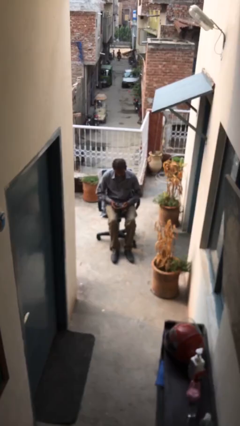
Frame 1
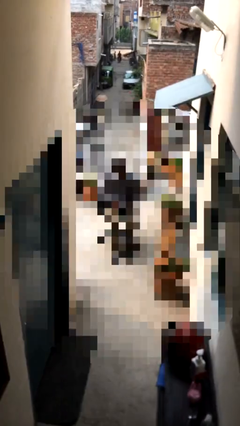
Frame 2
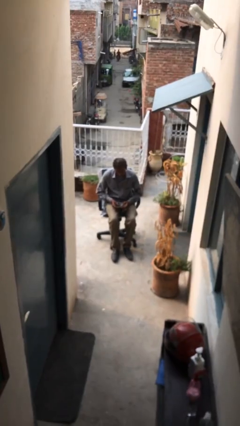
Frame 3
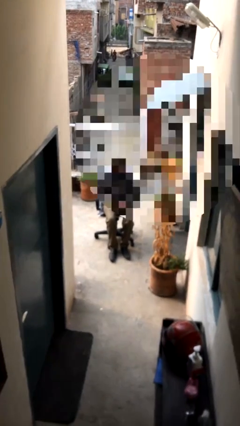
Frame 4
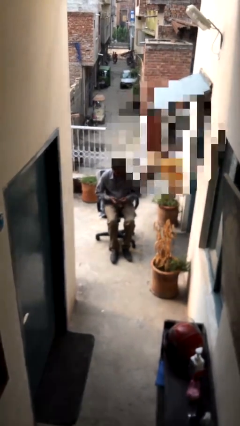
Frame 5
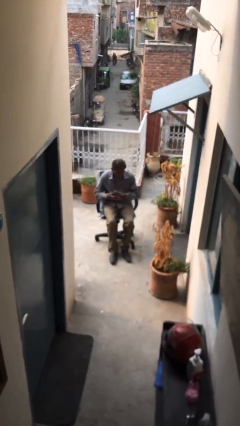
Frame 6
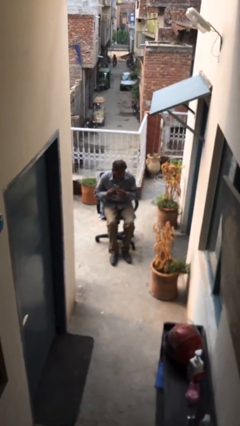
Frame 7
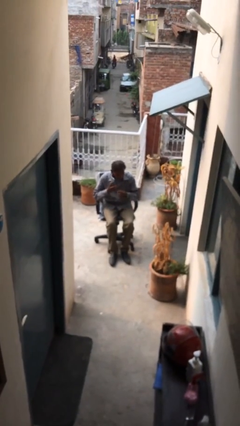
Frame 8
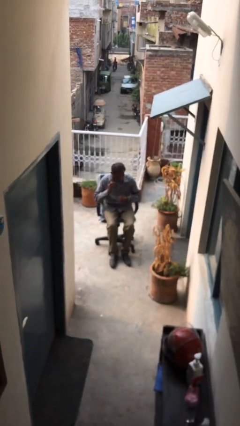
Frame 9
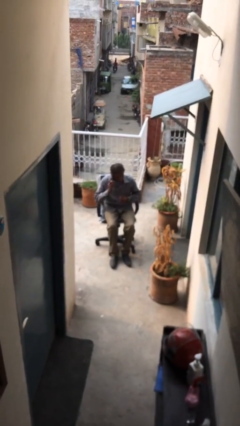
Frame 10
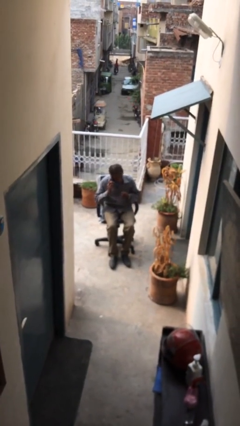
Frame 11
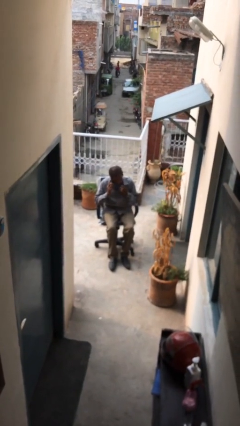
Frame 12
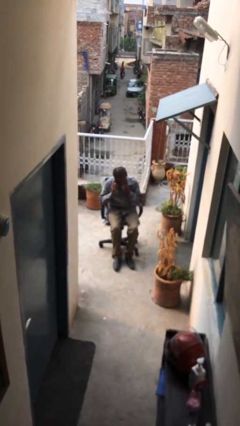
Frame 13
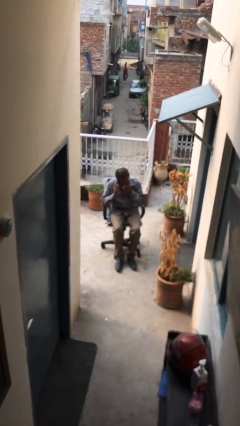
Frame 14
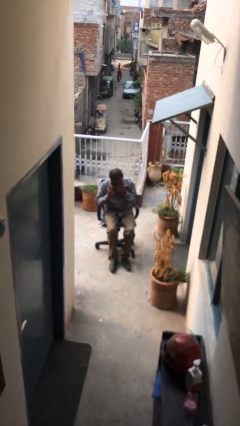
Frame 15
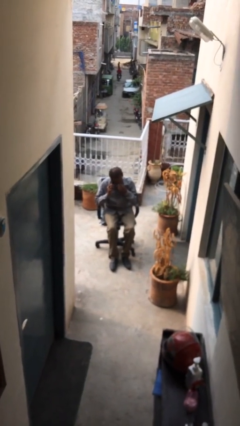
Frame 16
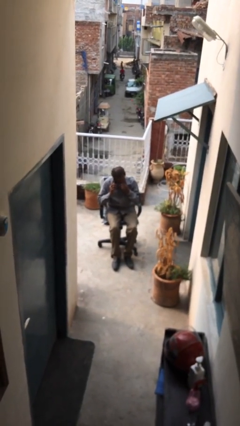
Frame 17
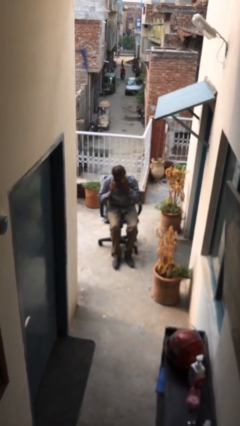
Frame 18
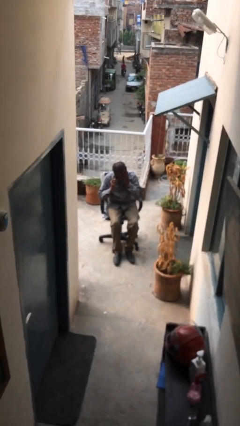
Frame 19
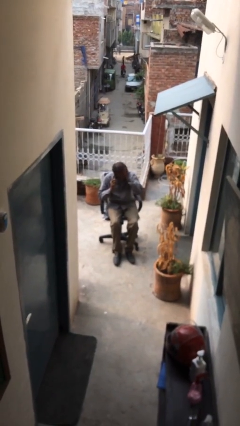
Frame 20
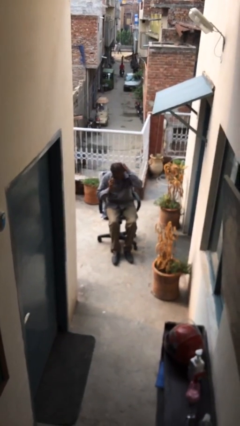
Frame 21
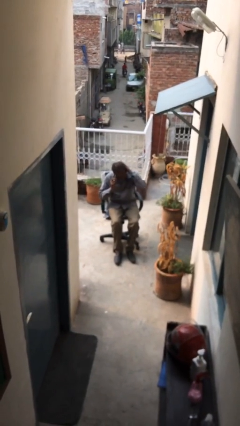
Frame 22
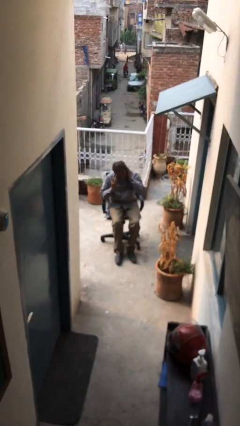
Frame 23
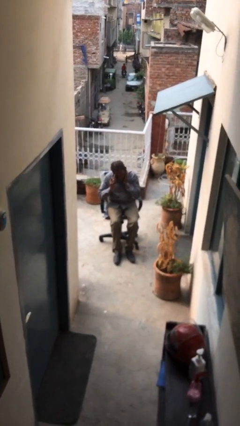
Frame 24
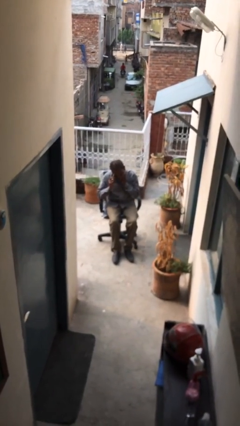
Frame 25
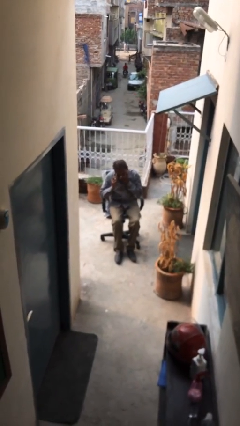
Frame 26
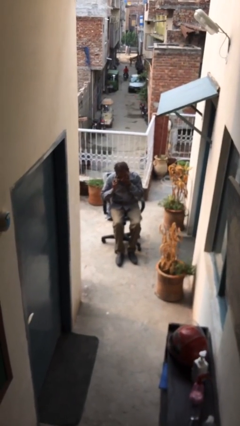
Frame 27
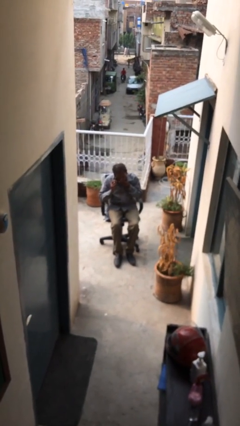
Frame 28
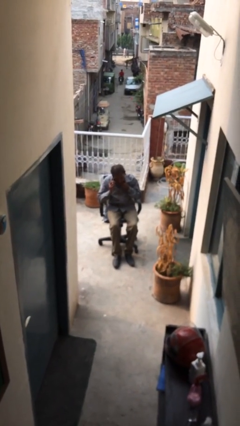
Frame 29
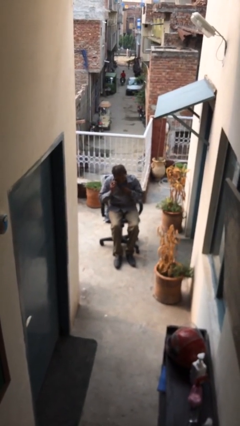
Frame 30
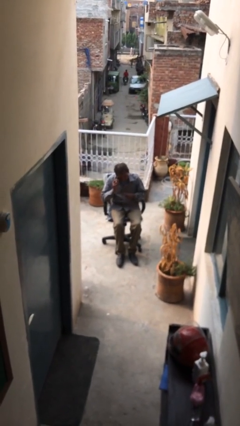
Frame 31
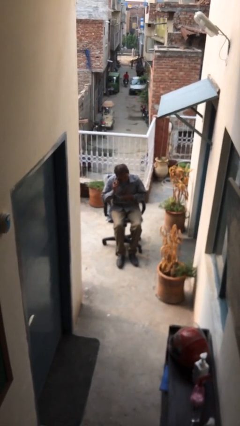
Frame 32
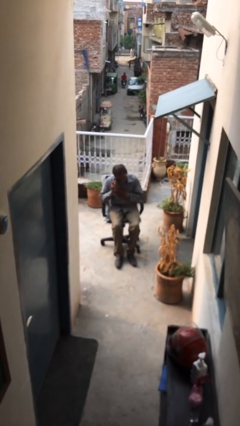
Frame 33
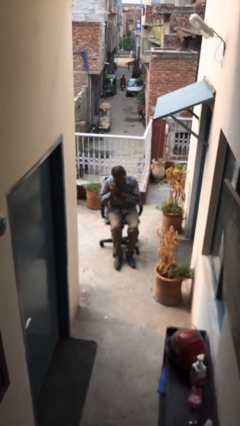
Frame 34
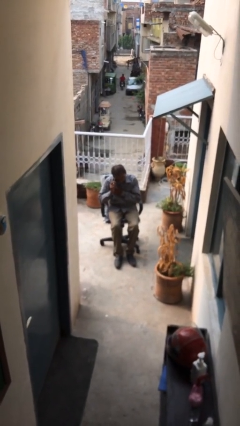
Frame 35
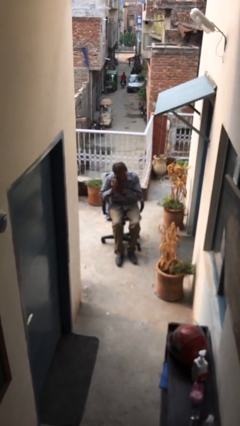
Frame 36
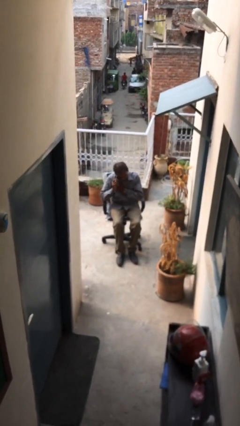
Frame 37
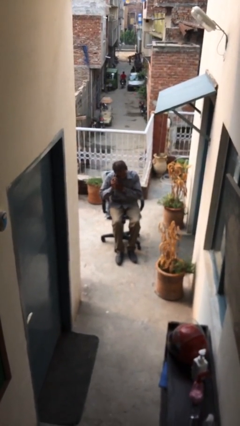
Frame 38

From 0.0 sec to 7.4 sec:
person talks on phone

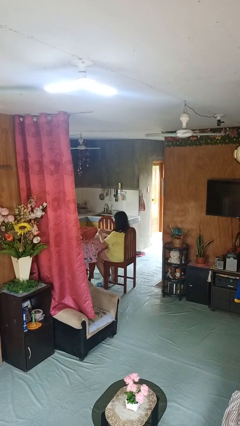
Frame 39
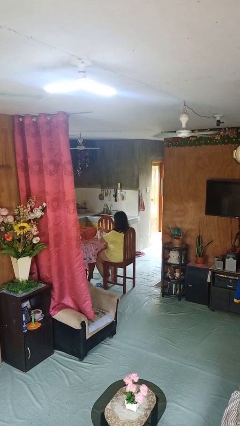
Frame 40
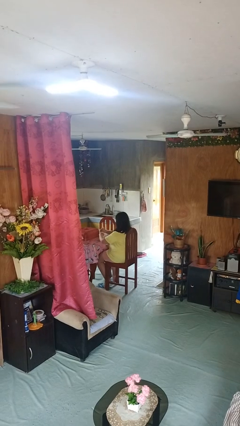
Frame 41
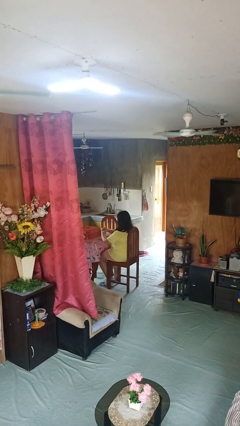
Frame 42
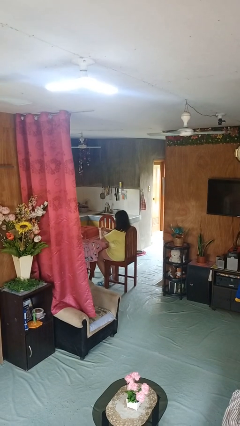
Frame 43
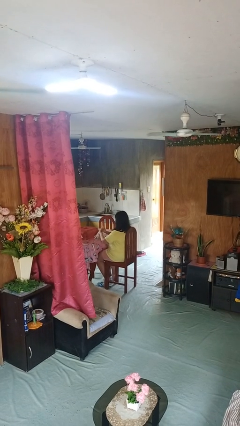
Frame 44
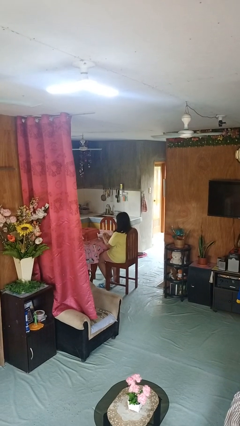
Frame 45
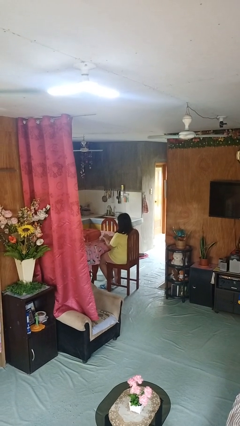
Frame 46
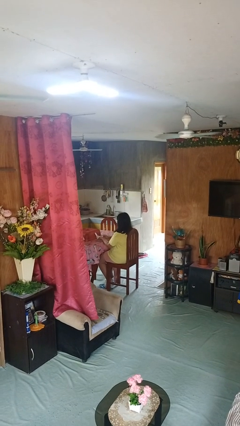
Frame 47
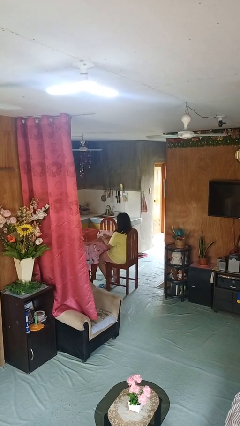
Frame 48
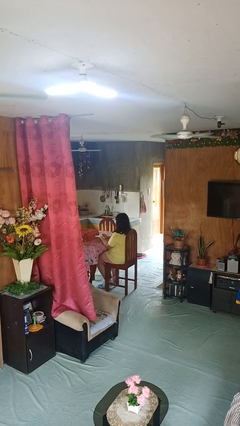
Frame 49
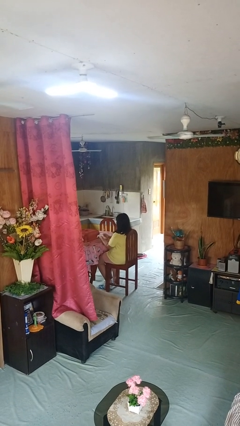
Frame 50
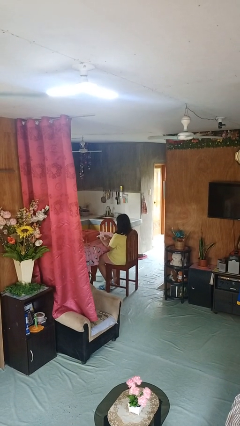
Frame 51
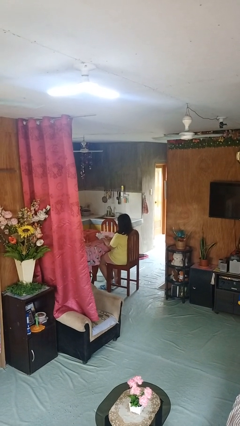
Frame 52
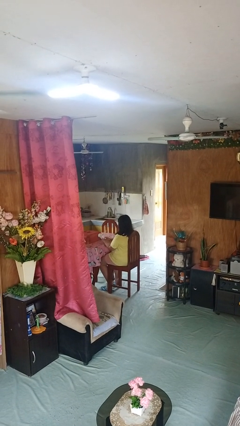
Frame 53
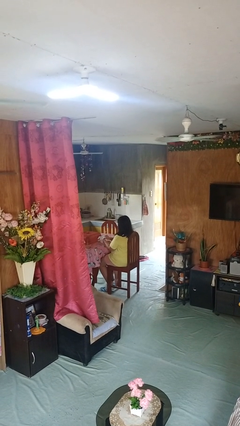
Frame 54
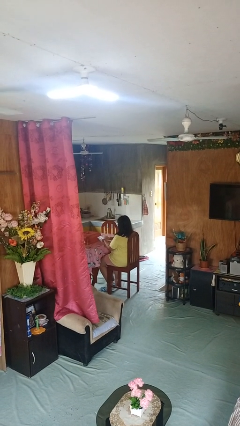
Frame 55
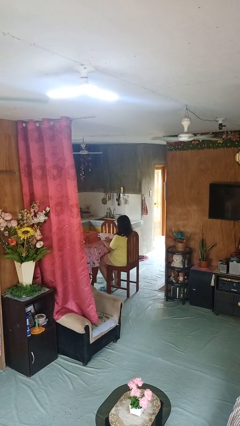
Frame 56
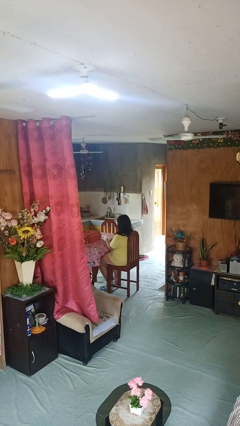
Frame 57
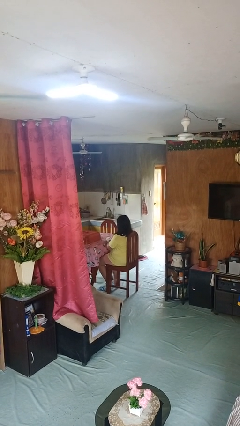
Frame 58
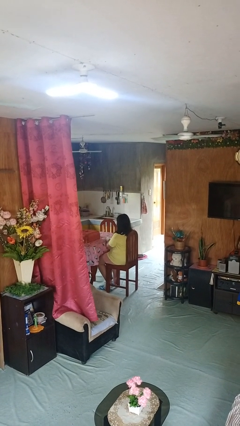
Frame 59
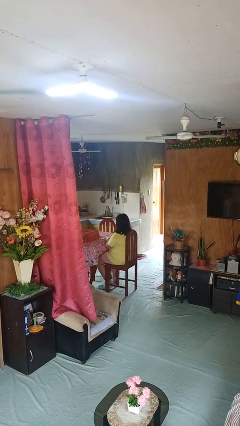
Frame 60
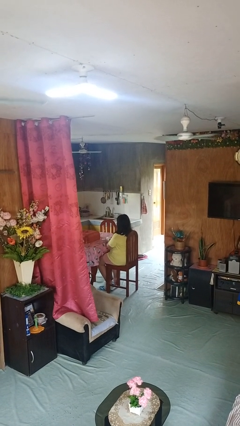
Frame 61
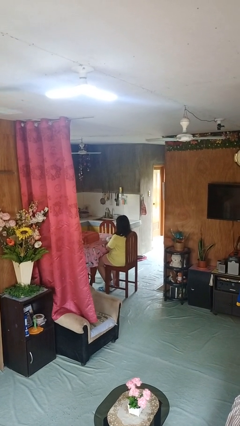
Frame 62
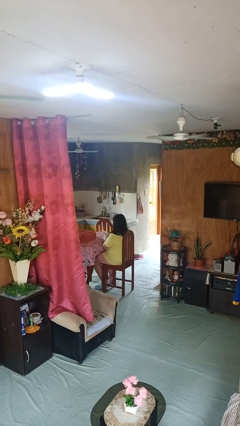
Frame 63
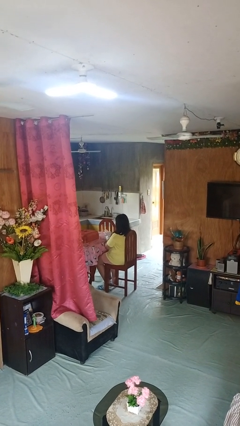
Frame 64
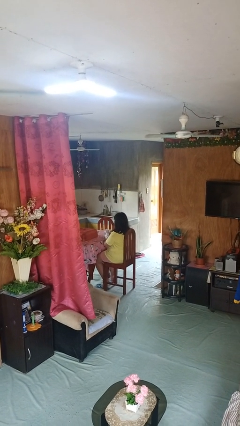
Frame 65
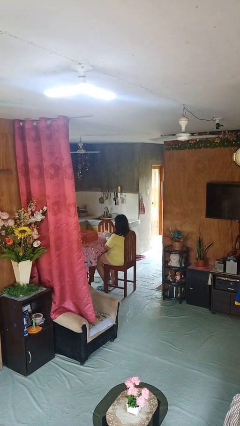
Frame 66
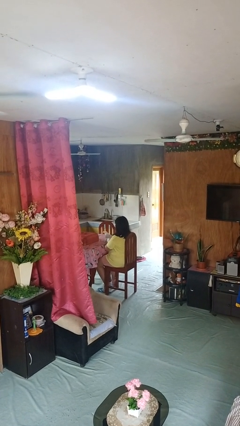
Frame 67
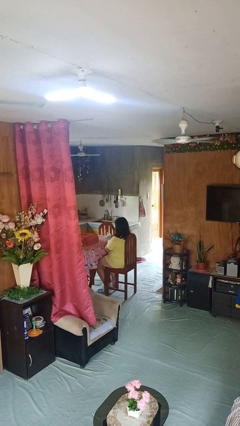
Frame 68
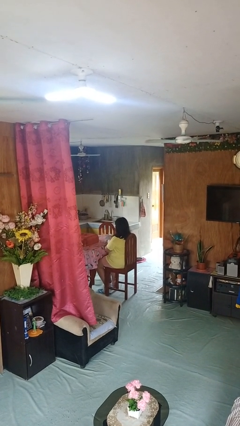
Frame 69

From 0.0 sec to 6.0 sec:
person puts on gloves

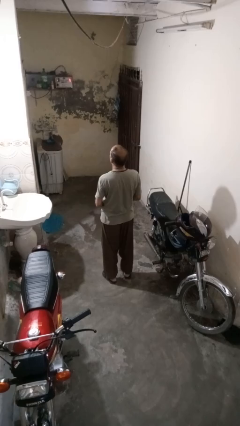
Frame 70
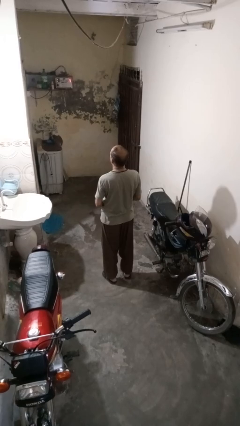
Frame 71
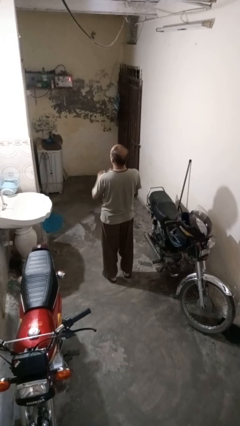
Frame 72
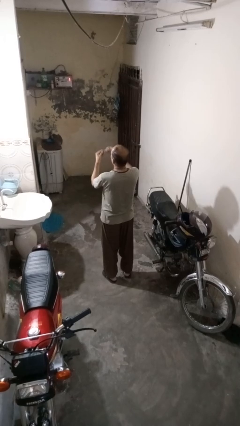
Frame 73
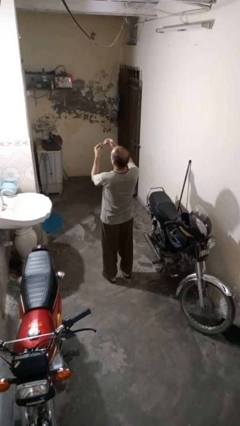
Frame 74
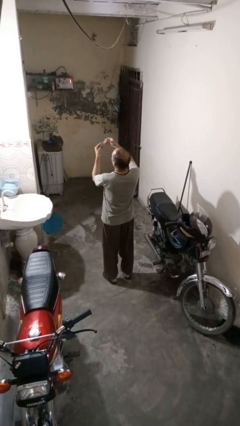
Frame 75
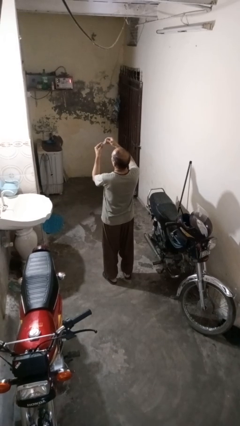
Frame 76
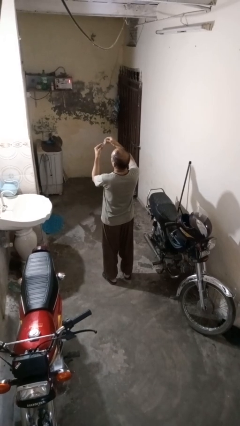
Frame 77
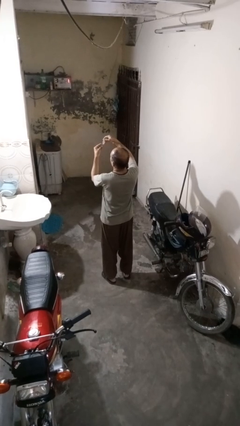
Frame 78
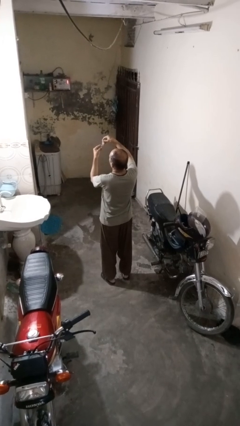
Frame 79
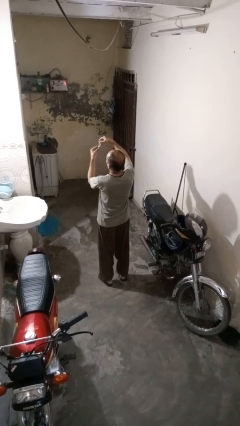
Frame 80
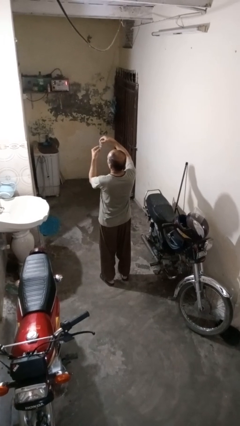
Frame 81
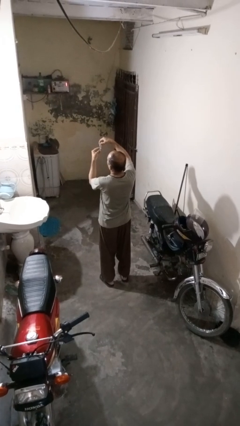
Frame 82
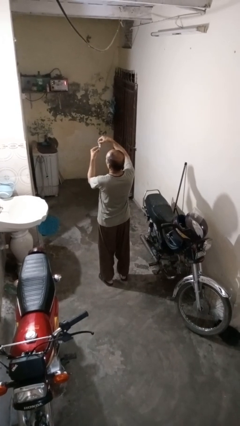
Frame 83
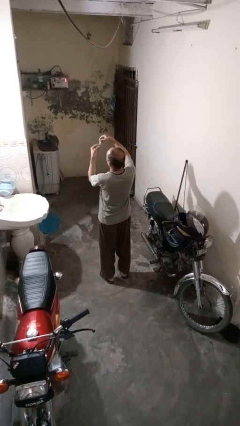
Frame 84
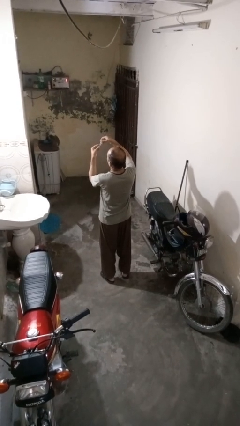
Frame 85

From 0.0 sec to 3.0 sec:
person clips fingernails

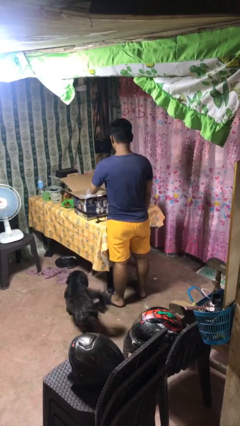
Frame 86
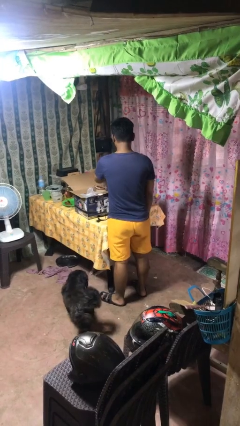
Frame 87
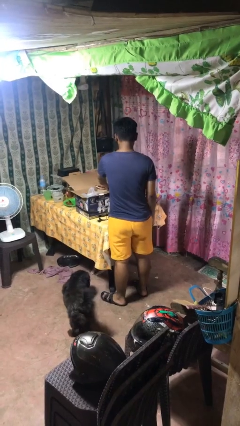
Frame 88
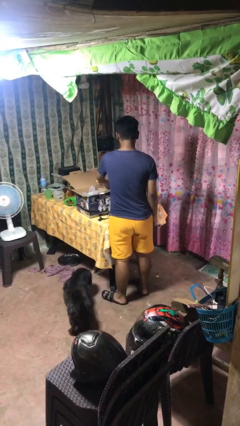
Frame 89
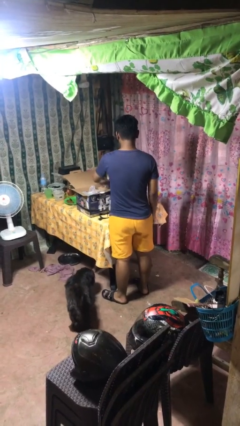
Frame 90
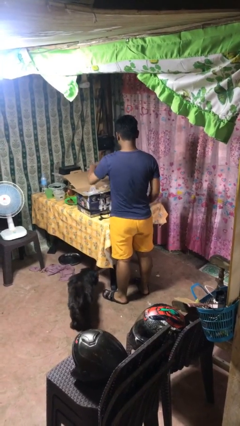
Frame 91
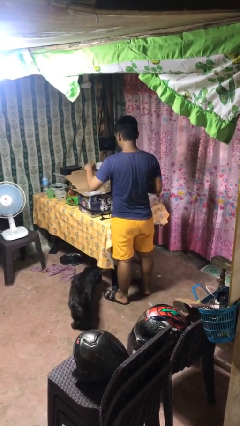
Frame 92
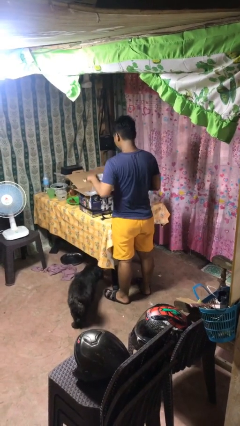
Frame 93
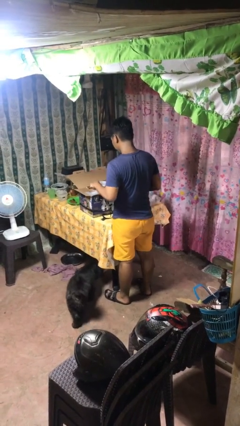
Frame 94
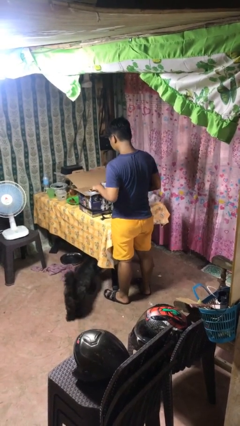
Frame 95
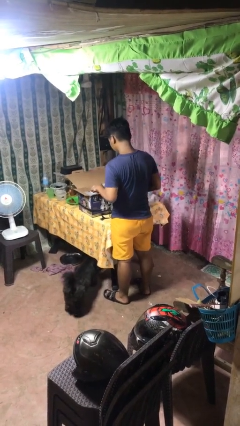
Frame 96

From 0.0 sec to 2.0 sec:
person takes object from box
